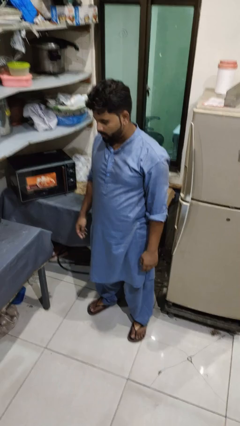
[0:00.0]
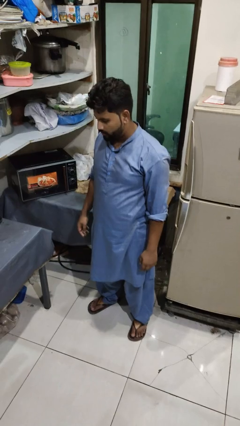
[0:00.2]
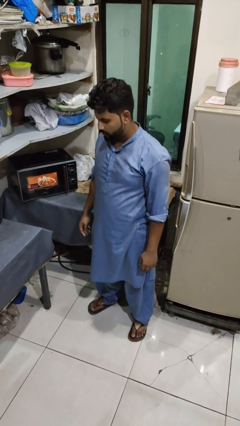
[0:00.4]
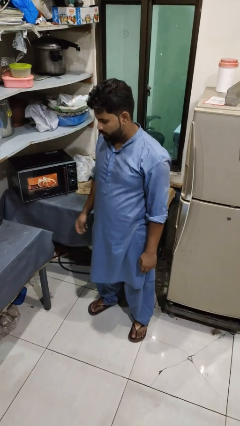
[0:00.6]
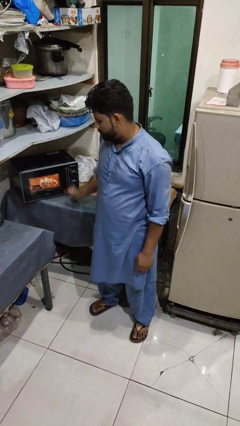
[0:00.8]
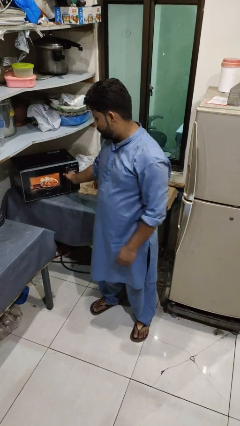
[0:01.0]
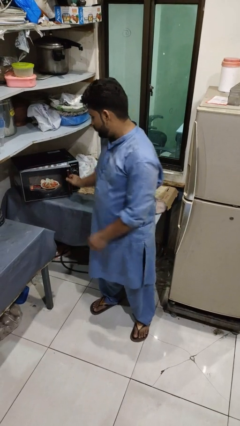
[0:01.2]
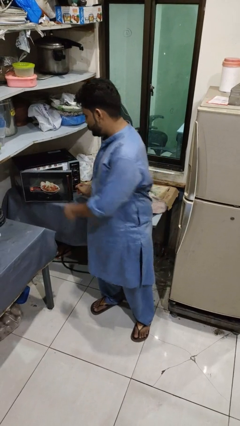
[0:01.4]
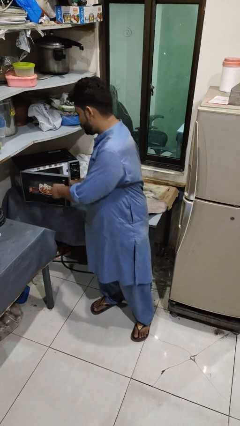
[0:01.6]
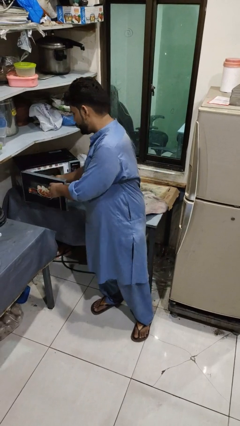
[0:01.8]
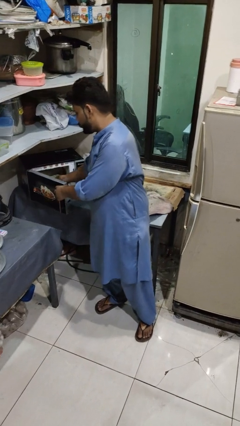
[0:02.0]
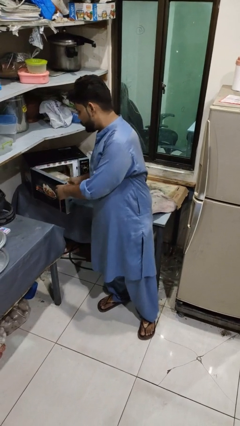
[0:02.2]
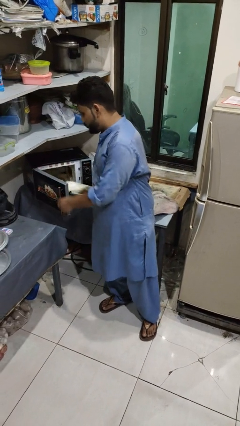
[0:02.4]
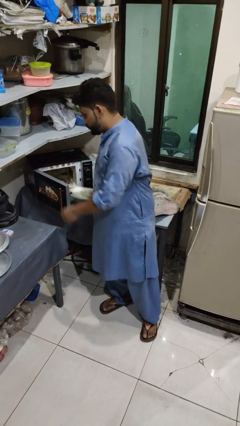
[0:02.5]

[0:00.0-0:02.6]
person takes object from microwave

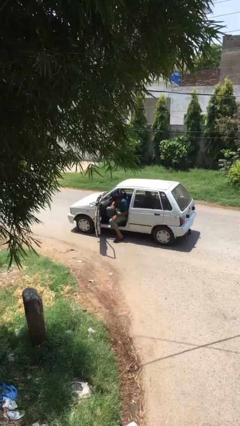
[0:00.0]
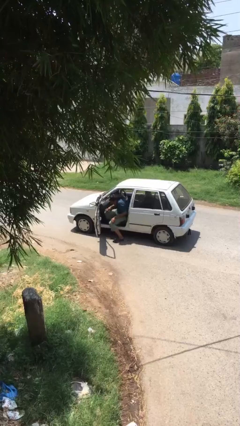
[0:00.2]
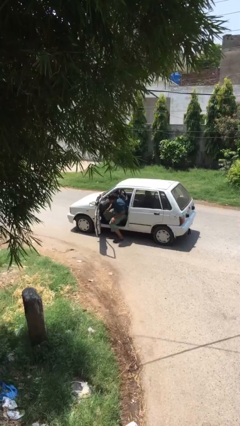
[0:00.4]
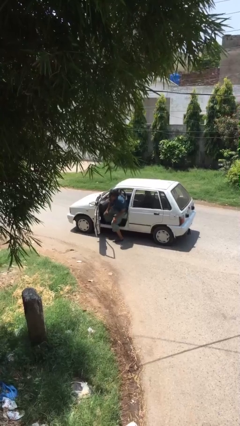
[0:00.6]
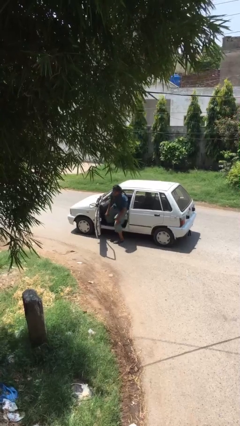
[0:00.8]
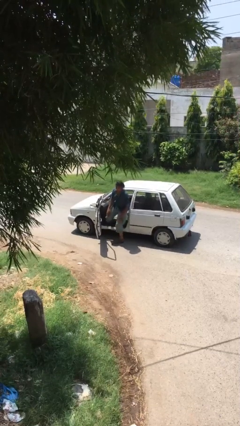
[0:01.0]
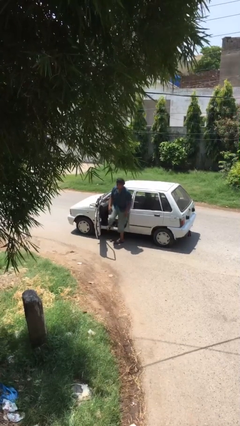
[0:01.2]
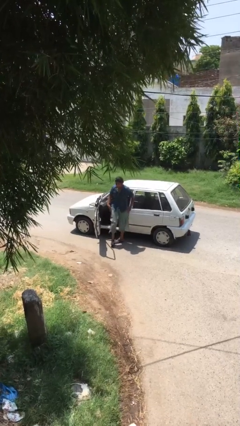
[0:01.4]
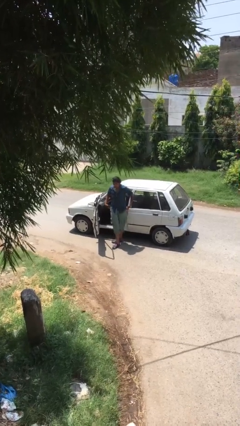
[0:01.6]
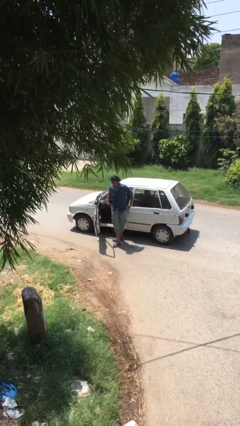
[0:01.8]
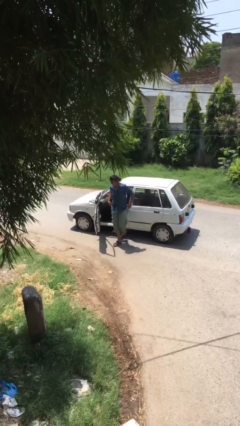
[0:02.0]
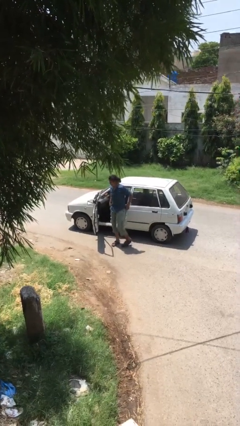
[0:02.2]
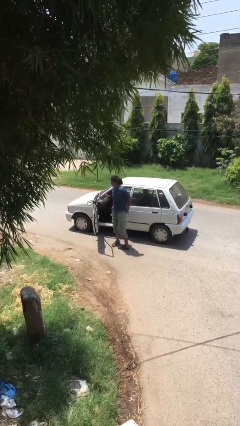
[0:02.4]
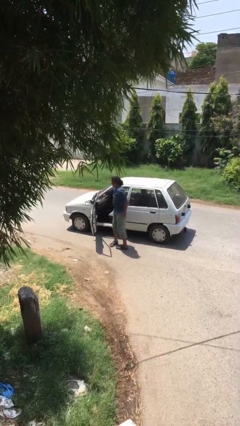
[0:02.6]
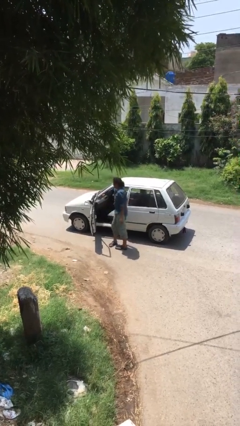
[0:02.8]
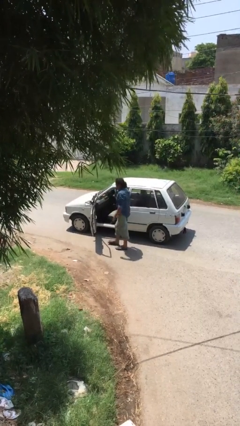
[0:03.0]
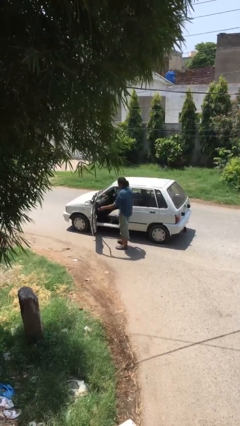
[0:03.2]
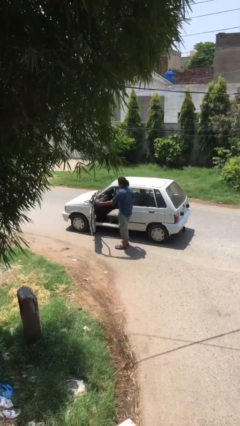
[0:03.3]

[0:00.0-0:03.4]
person exits car

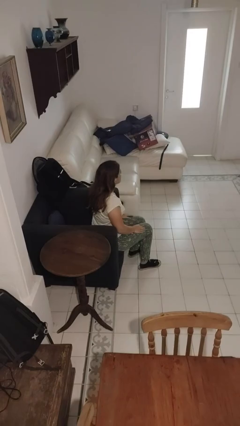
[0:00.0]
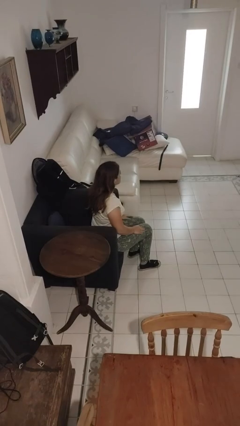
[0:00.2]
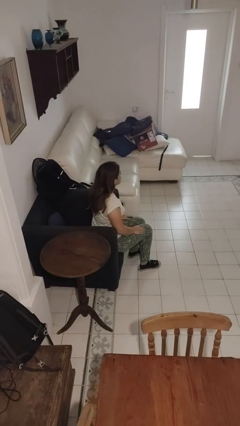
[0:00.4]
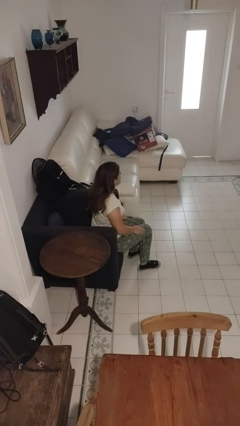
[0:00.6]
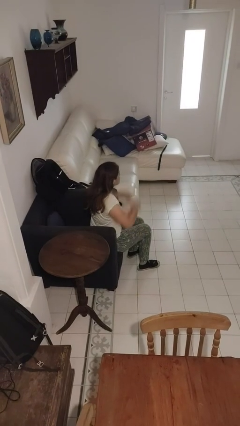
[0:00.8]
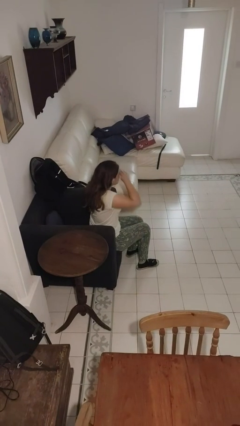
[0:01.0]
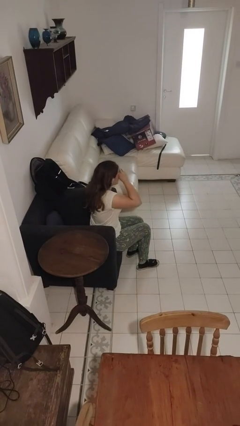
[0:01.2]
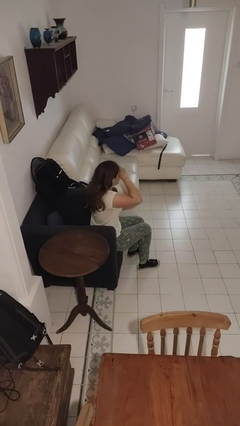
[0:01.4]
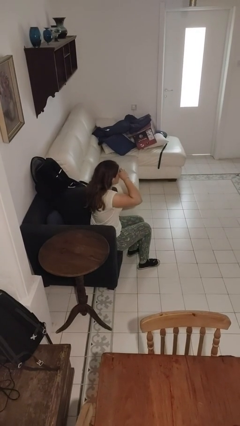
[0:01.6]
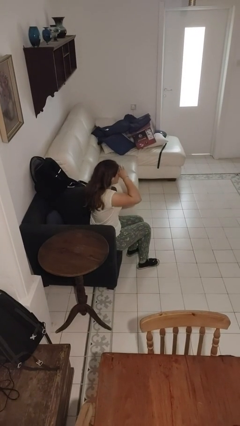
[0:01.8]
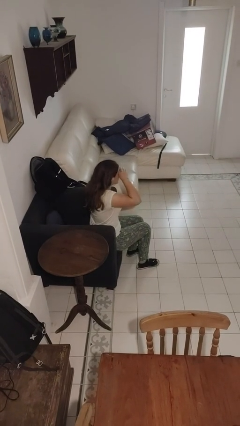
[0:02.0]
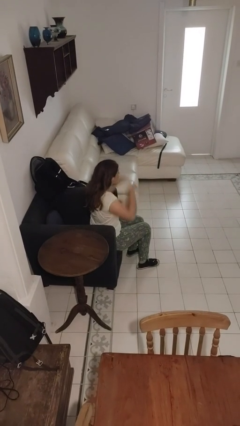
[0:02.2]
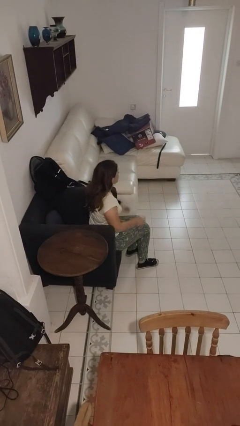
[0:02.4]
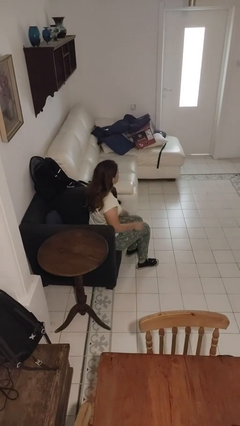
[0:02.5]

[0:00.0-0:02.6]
person rubs eyes

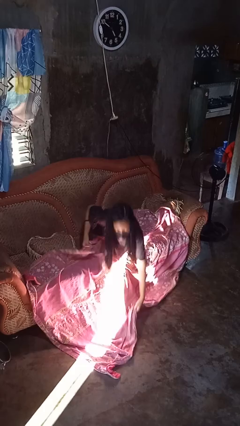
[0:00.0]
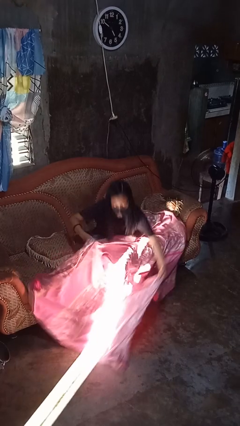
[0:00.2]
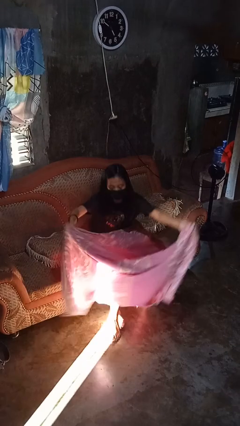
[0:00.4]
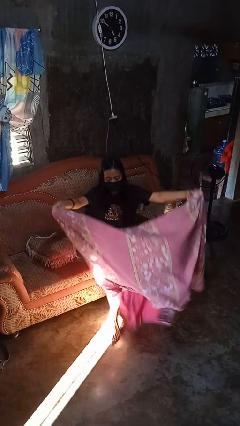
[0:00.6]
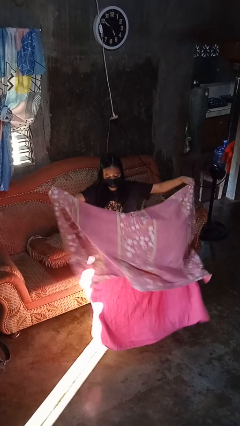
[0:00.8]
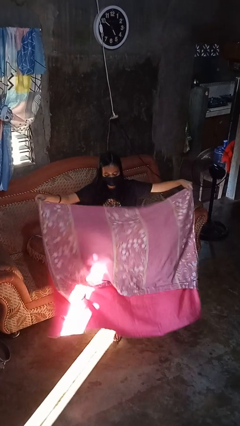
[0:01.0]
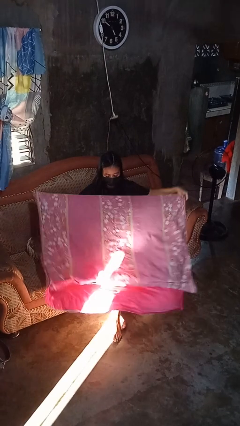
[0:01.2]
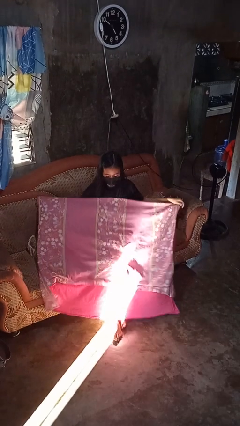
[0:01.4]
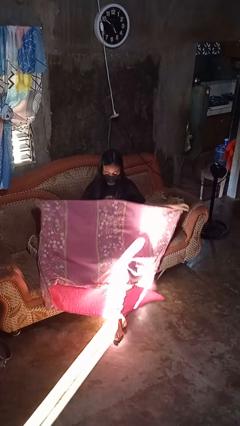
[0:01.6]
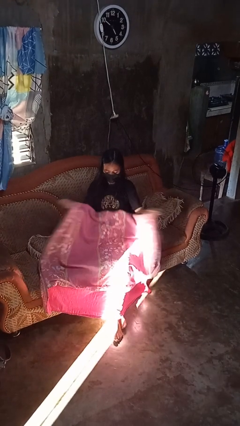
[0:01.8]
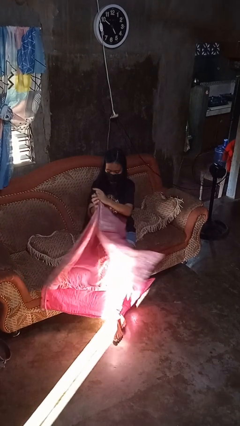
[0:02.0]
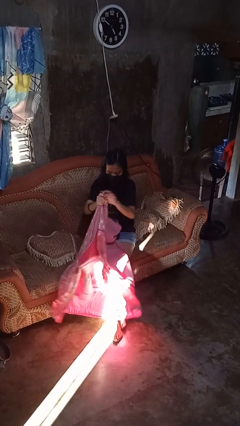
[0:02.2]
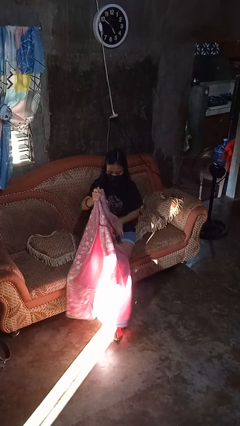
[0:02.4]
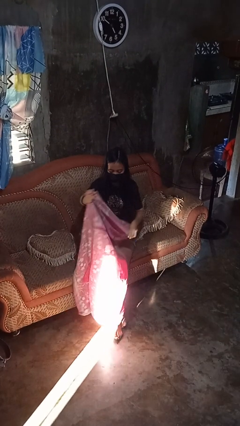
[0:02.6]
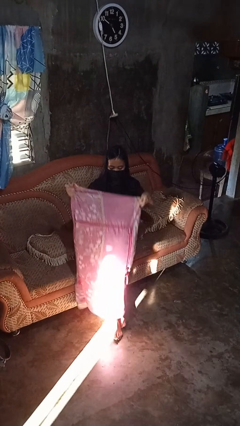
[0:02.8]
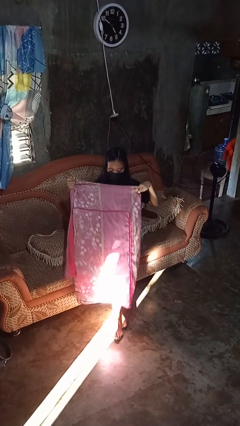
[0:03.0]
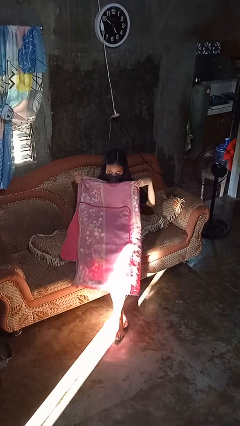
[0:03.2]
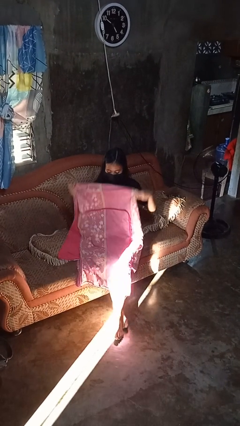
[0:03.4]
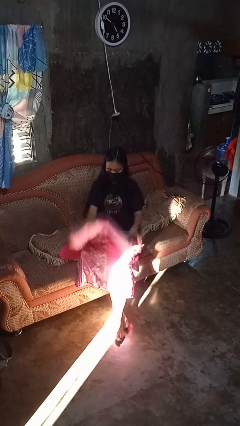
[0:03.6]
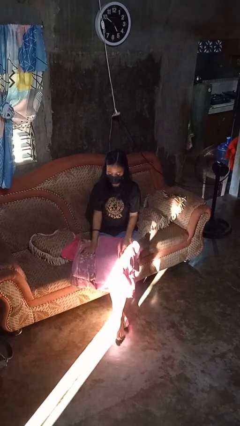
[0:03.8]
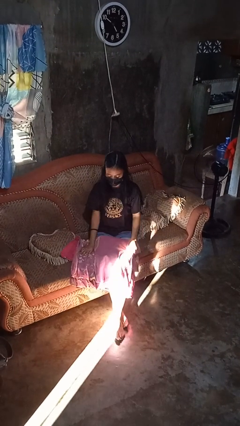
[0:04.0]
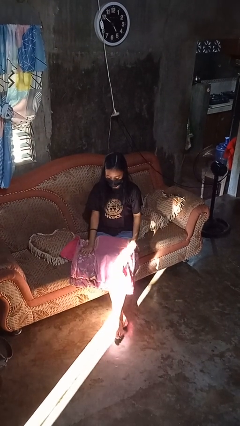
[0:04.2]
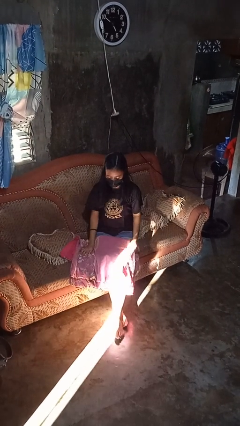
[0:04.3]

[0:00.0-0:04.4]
person folds blanket

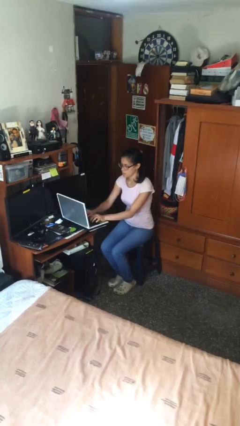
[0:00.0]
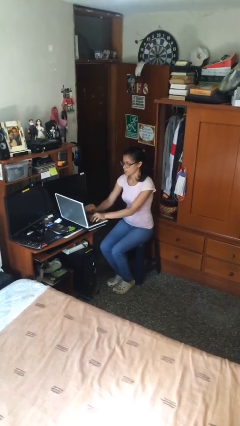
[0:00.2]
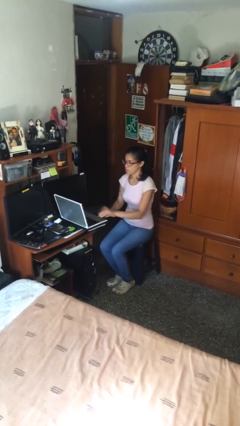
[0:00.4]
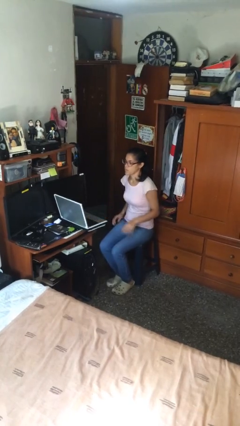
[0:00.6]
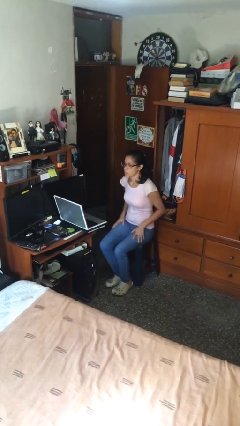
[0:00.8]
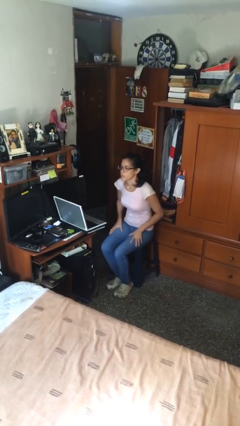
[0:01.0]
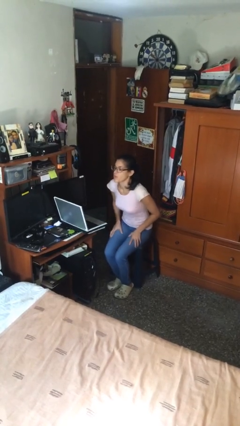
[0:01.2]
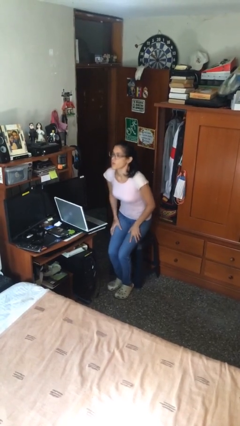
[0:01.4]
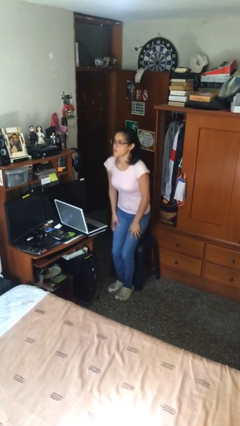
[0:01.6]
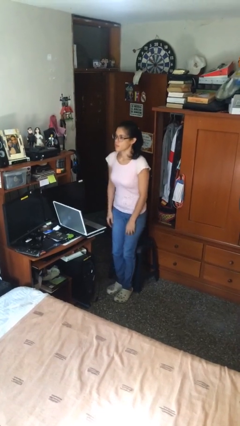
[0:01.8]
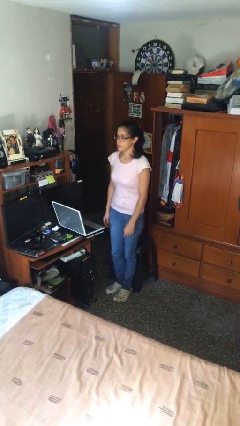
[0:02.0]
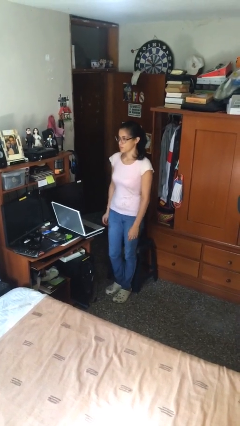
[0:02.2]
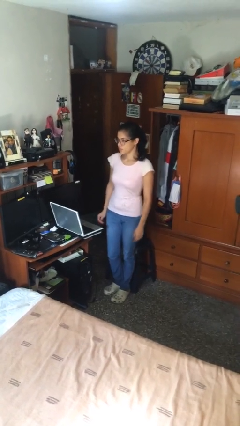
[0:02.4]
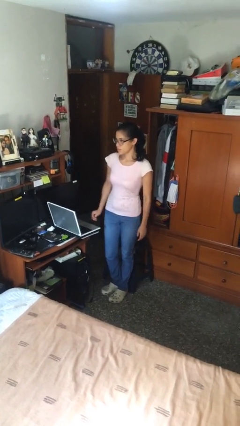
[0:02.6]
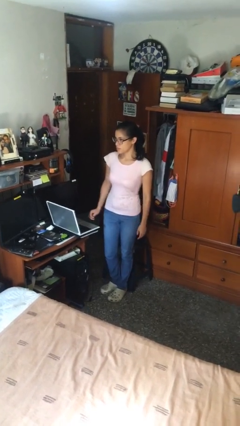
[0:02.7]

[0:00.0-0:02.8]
person stands up

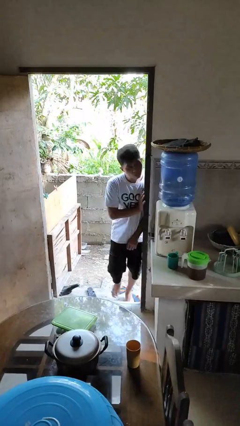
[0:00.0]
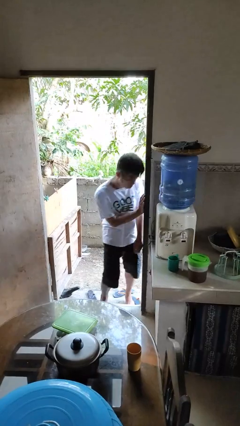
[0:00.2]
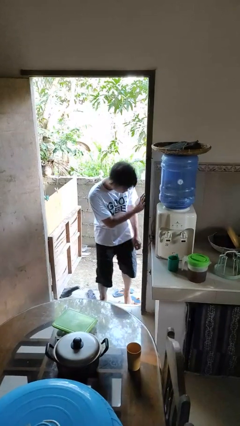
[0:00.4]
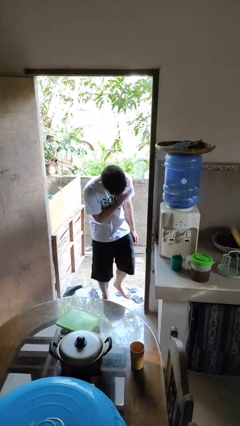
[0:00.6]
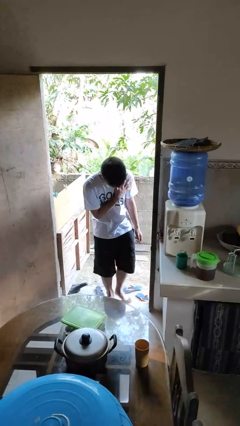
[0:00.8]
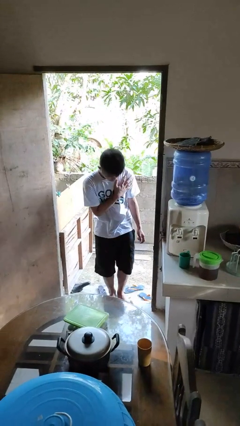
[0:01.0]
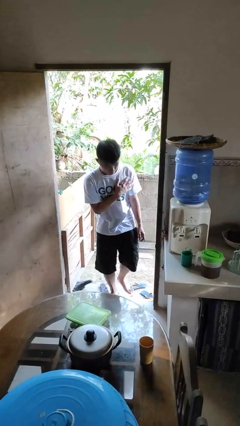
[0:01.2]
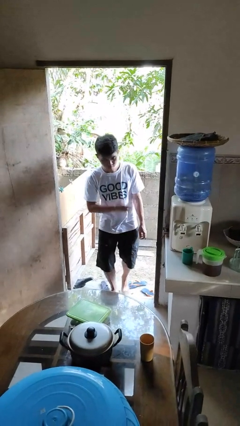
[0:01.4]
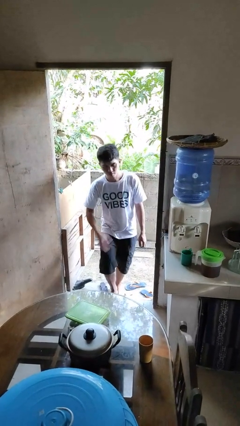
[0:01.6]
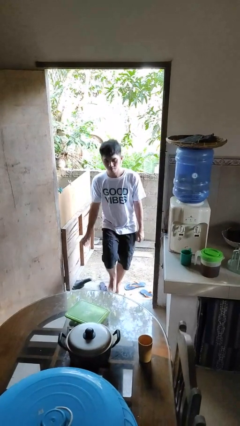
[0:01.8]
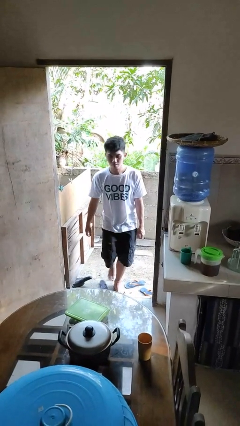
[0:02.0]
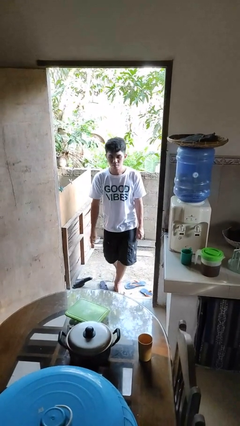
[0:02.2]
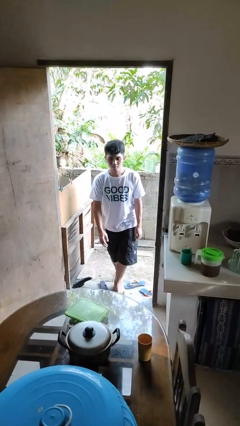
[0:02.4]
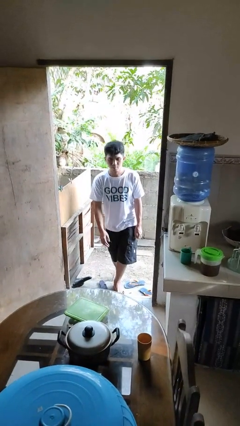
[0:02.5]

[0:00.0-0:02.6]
person bumps into wall
